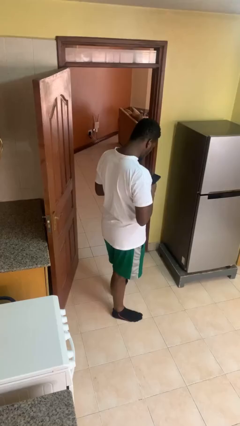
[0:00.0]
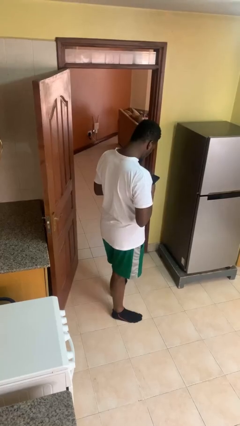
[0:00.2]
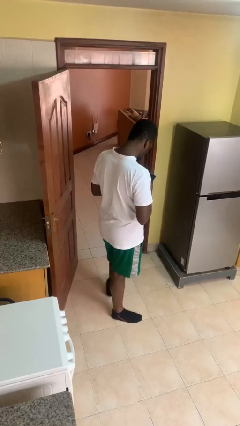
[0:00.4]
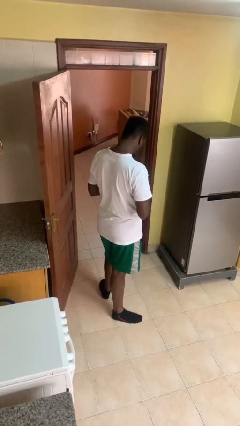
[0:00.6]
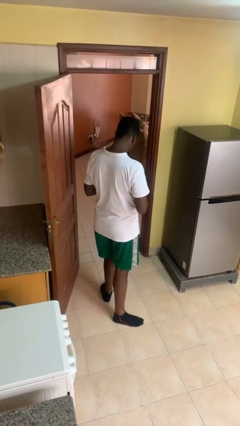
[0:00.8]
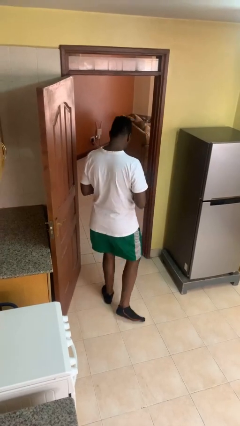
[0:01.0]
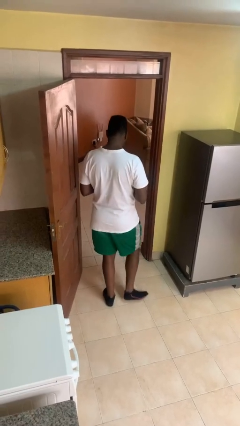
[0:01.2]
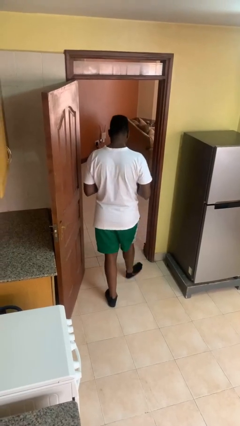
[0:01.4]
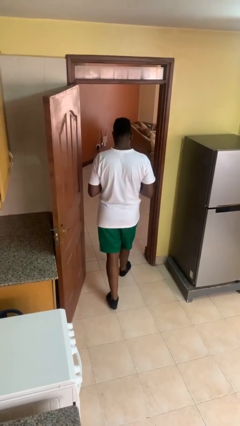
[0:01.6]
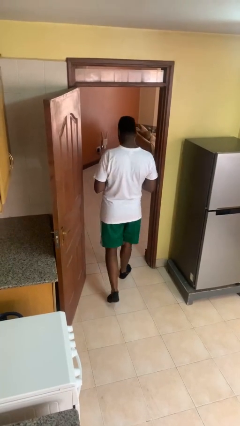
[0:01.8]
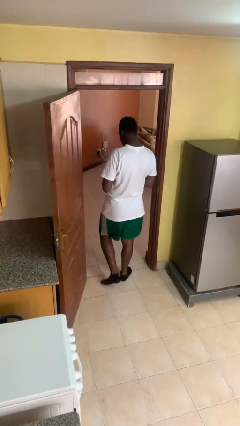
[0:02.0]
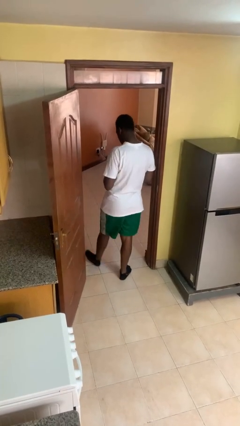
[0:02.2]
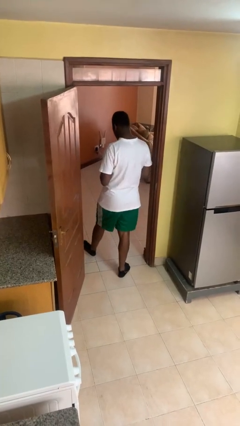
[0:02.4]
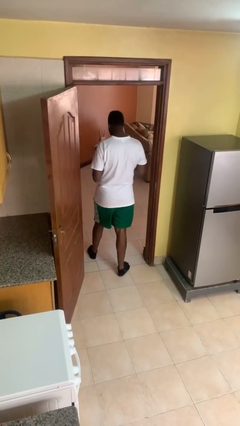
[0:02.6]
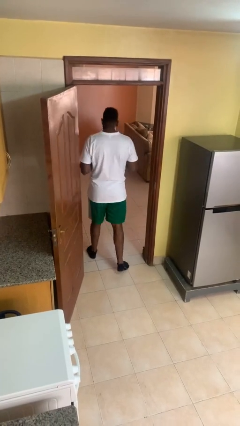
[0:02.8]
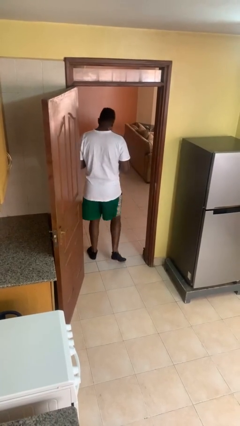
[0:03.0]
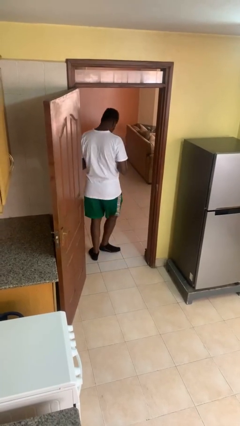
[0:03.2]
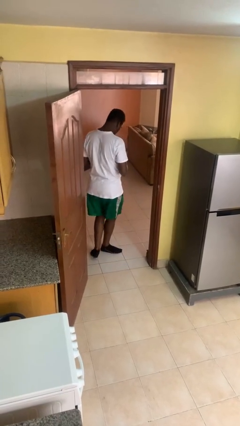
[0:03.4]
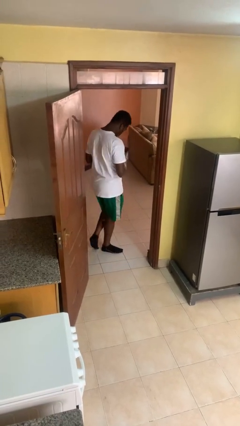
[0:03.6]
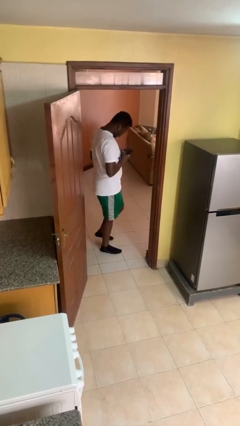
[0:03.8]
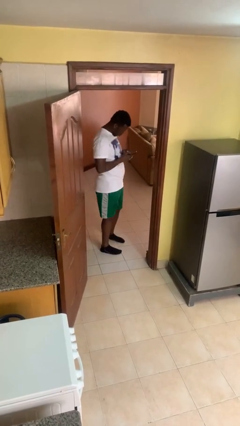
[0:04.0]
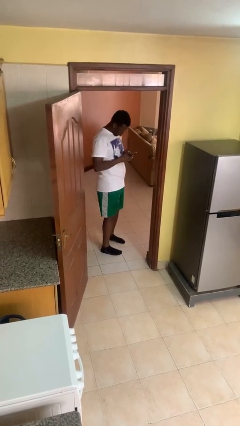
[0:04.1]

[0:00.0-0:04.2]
person exits scene through structure

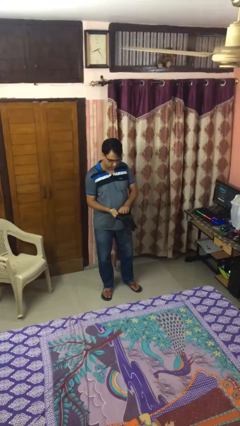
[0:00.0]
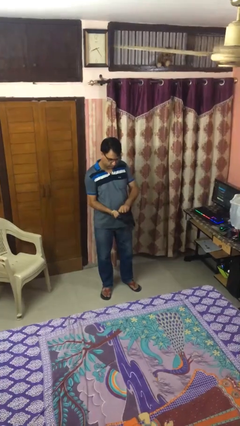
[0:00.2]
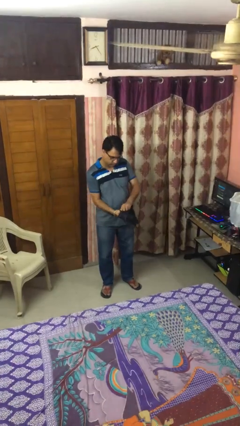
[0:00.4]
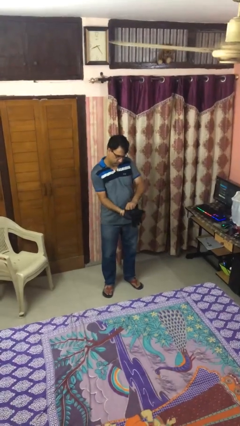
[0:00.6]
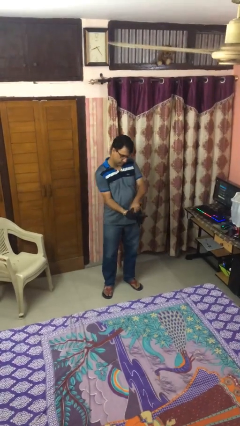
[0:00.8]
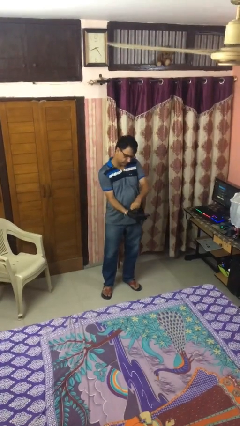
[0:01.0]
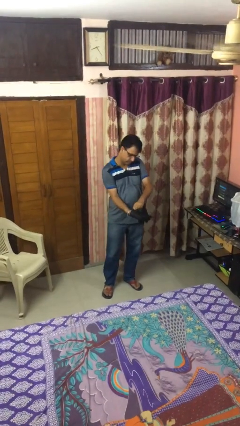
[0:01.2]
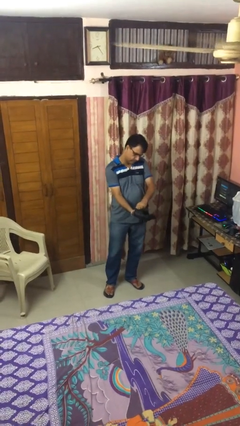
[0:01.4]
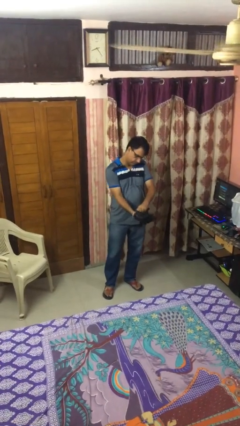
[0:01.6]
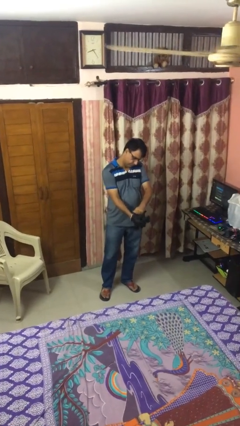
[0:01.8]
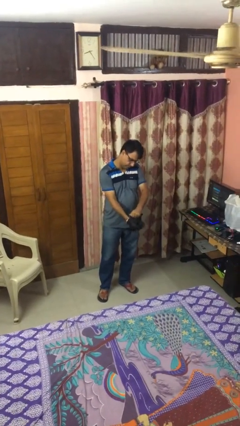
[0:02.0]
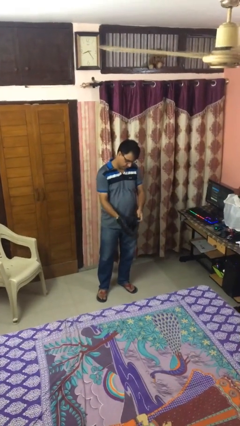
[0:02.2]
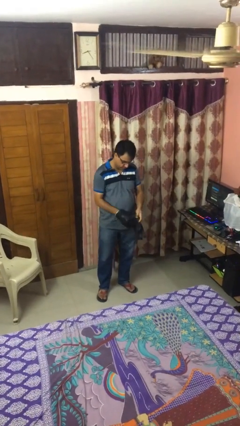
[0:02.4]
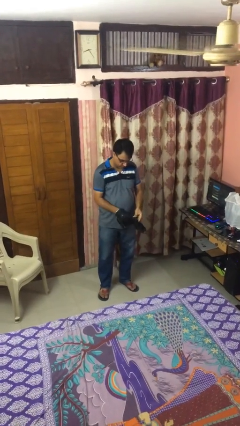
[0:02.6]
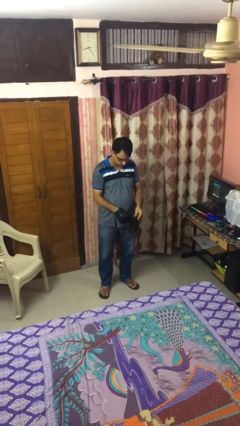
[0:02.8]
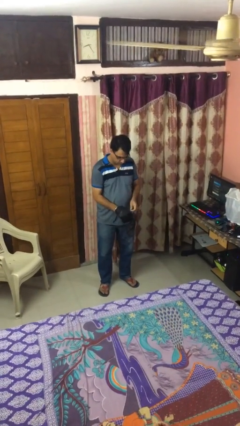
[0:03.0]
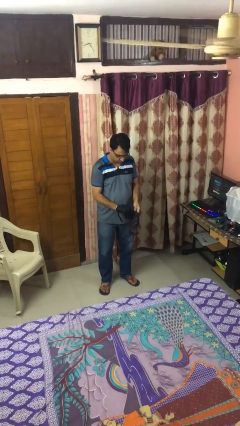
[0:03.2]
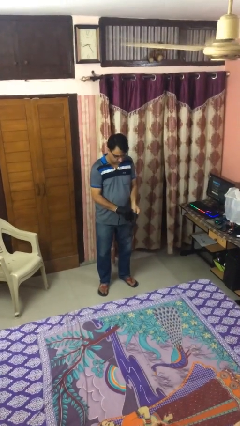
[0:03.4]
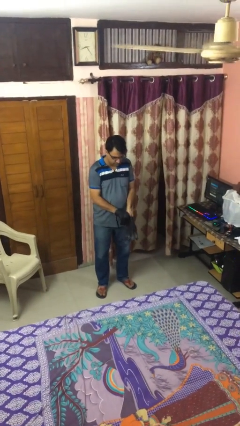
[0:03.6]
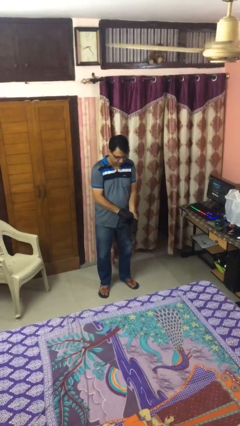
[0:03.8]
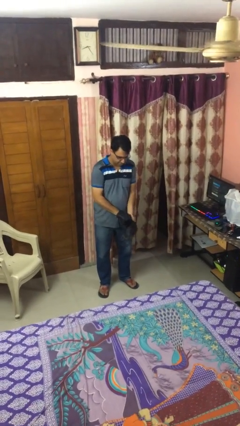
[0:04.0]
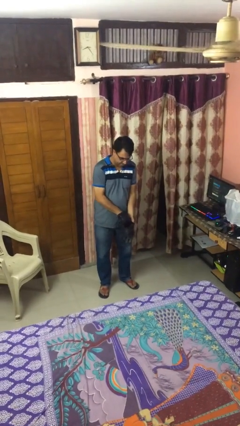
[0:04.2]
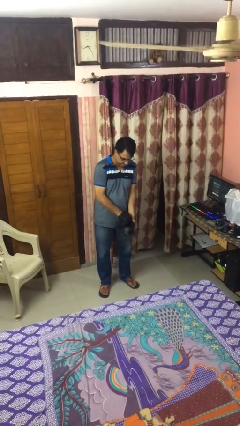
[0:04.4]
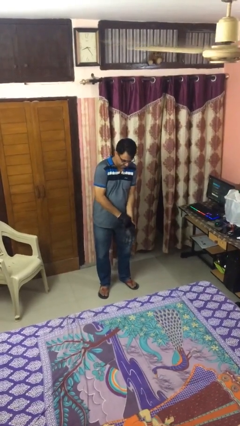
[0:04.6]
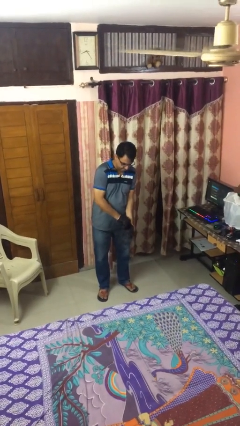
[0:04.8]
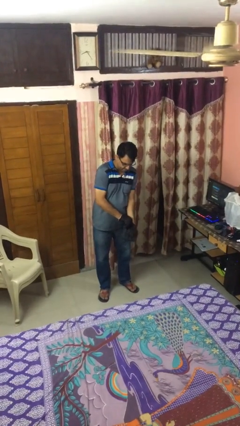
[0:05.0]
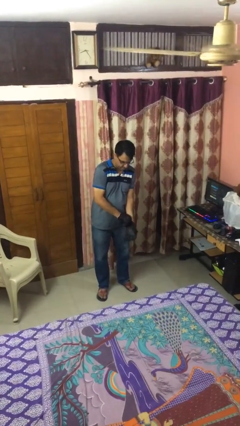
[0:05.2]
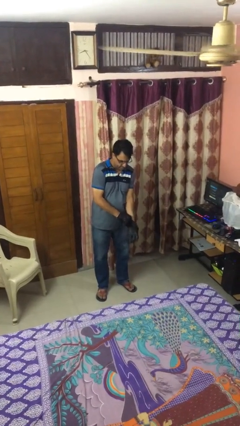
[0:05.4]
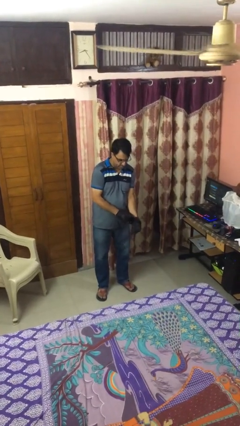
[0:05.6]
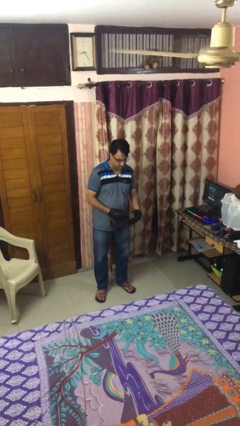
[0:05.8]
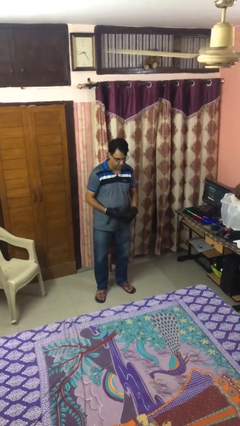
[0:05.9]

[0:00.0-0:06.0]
person puts on gloves

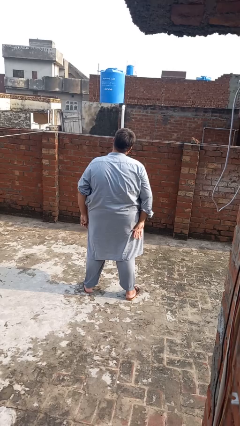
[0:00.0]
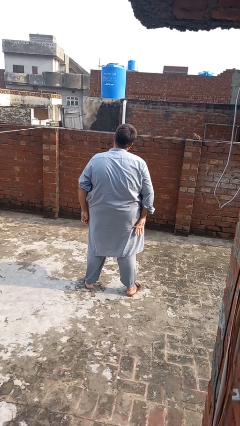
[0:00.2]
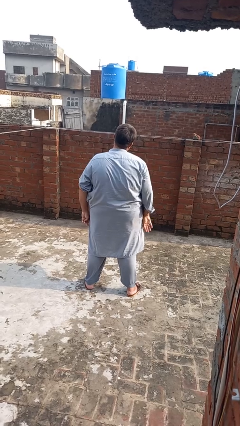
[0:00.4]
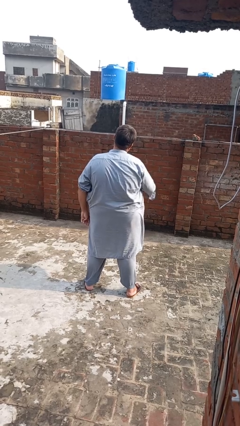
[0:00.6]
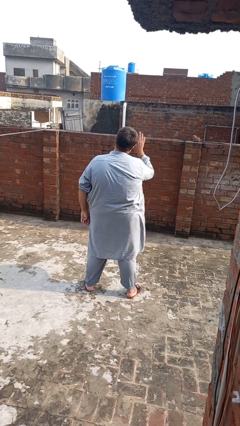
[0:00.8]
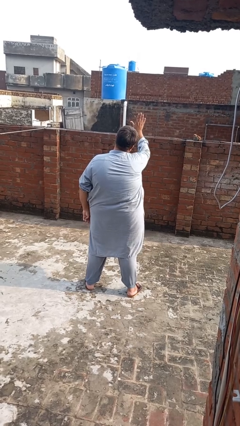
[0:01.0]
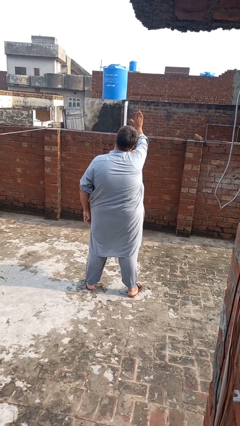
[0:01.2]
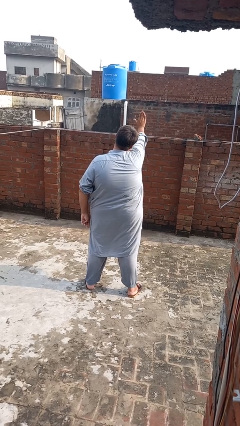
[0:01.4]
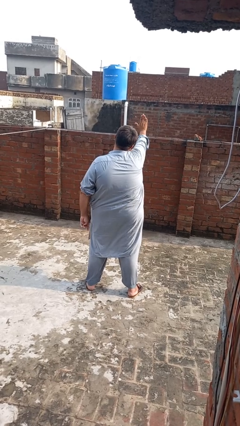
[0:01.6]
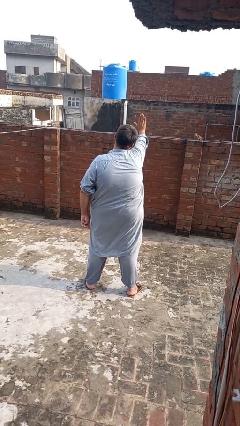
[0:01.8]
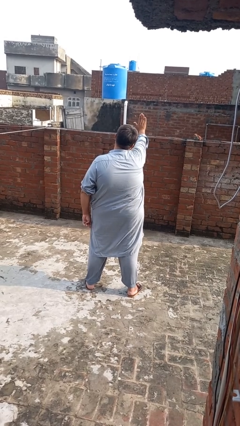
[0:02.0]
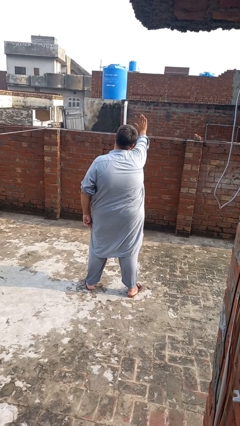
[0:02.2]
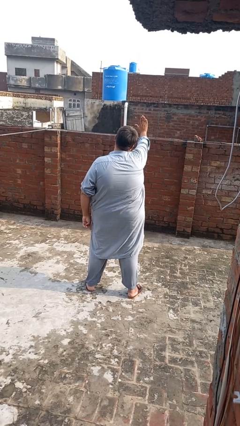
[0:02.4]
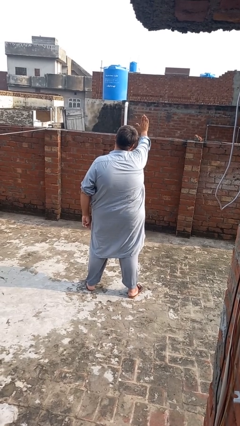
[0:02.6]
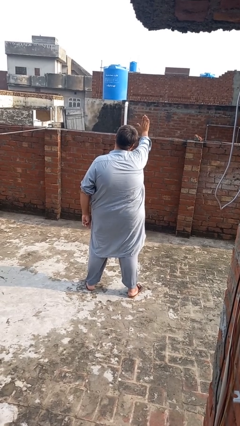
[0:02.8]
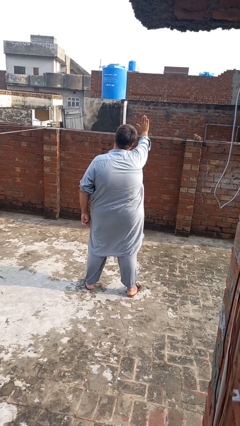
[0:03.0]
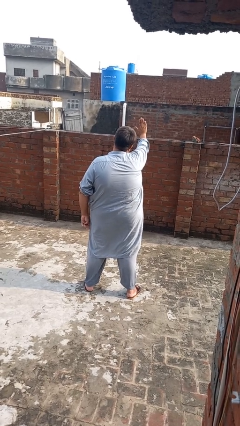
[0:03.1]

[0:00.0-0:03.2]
person gestures stop

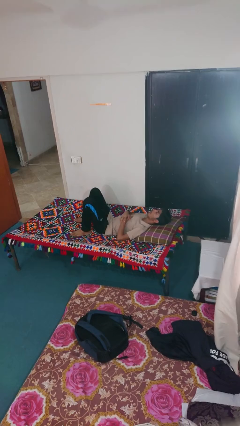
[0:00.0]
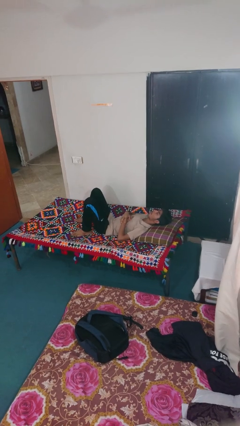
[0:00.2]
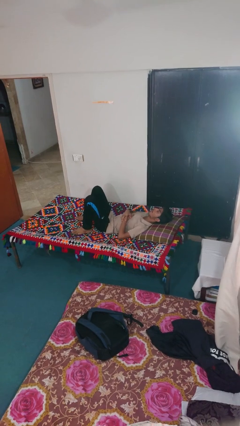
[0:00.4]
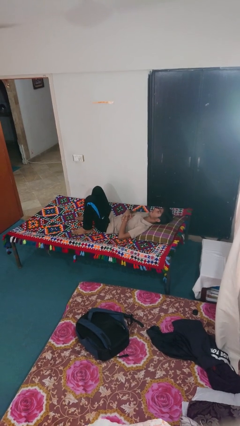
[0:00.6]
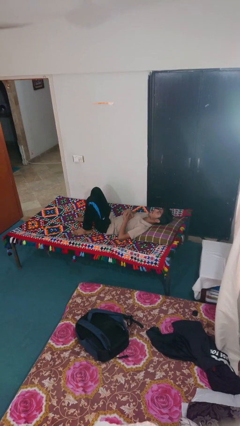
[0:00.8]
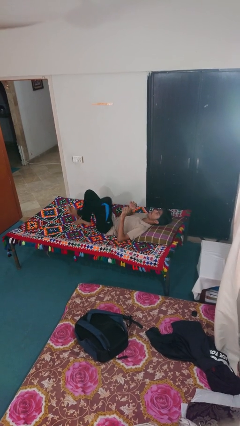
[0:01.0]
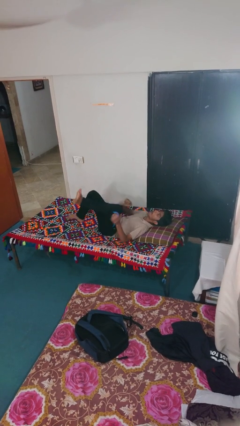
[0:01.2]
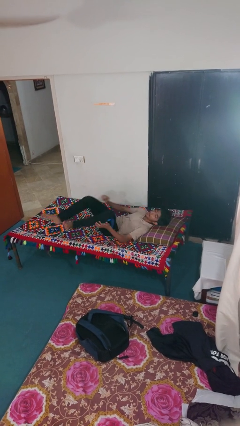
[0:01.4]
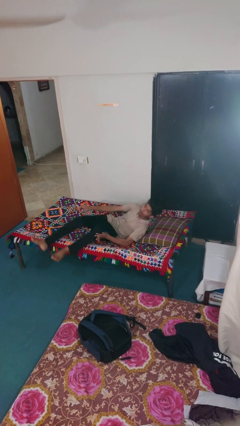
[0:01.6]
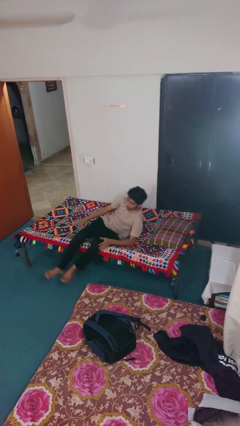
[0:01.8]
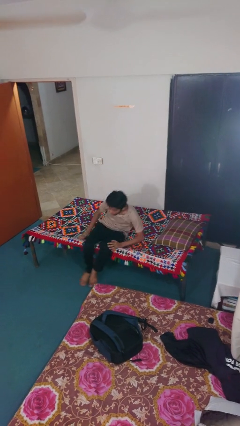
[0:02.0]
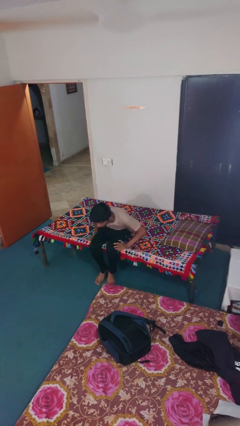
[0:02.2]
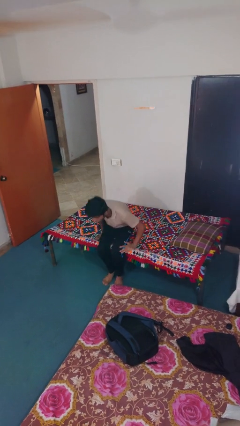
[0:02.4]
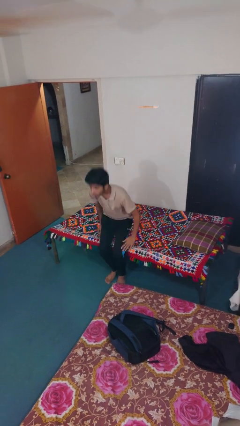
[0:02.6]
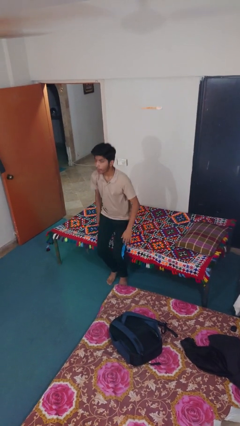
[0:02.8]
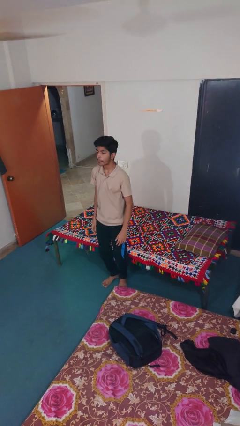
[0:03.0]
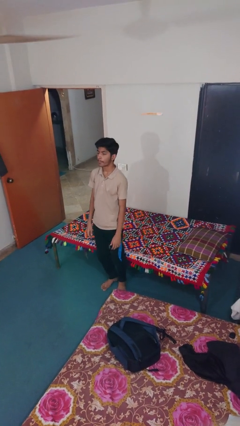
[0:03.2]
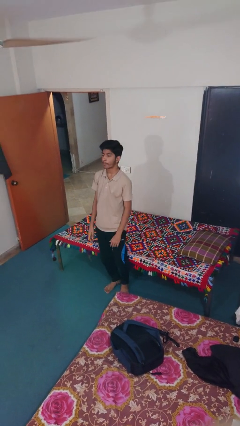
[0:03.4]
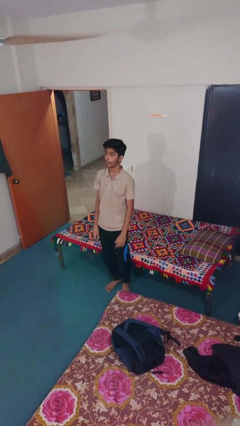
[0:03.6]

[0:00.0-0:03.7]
person stands up

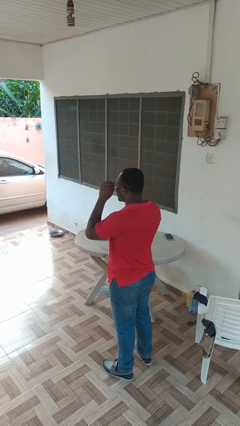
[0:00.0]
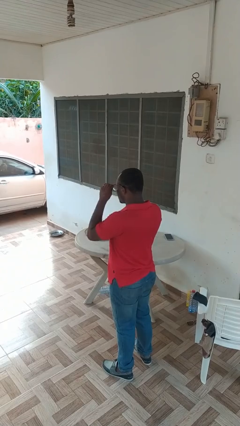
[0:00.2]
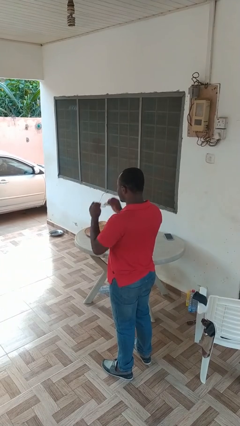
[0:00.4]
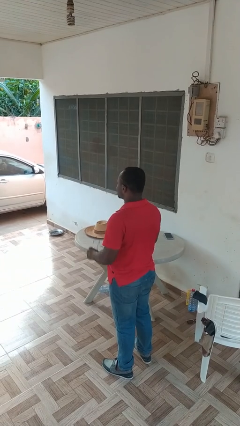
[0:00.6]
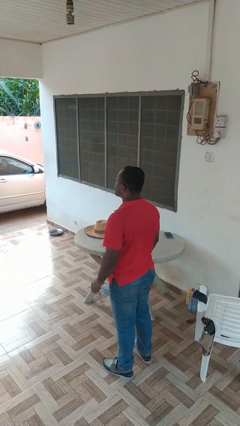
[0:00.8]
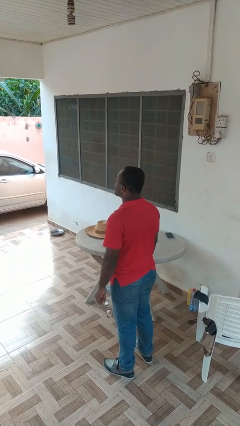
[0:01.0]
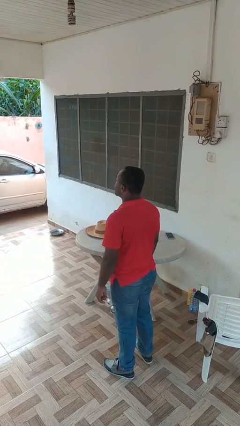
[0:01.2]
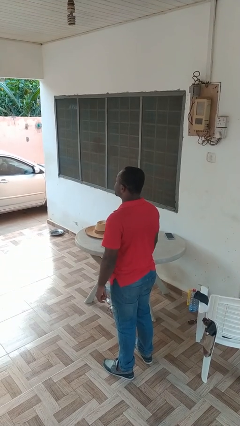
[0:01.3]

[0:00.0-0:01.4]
person takes off glasses
